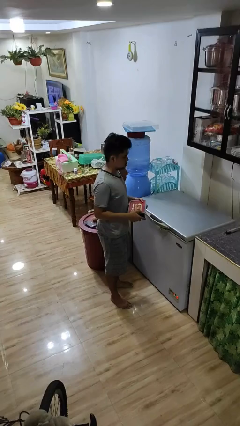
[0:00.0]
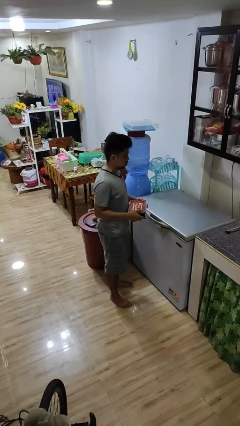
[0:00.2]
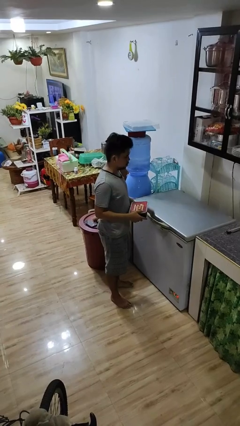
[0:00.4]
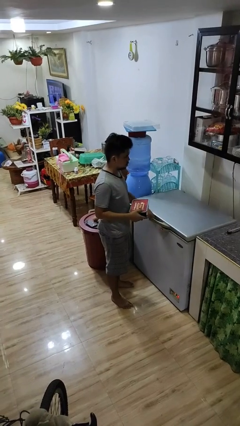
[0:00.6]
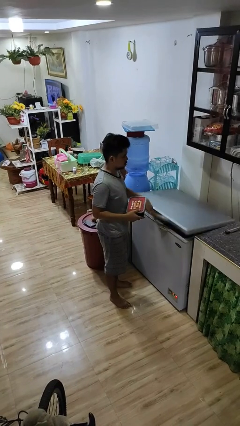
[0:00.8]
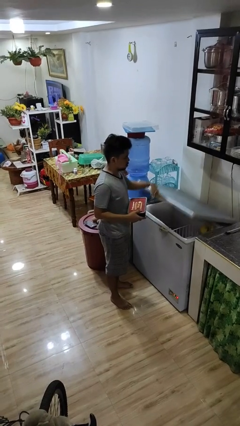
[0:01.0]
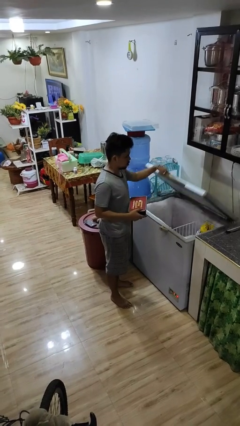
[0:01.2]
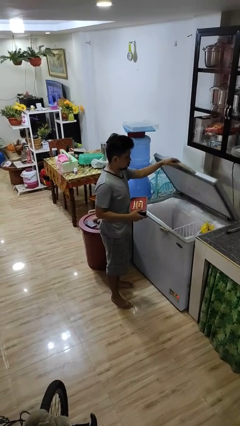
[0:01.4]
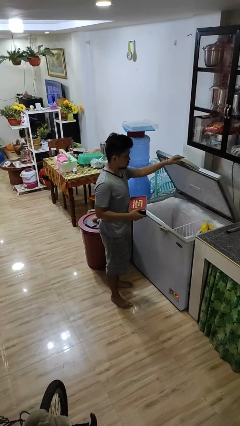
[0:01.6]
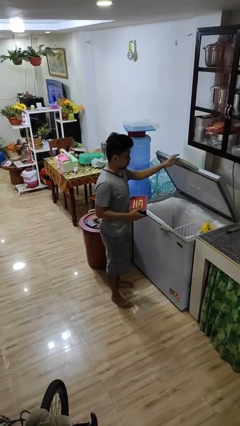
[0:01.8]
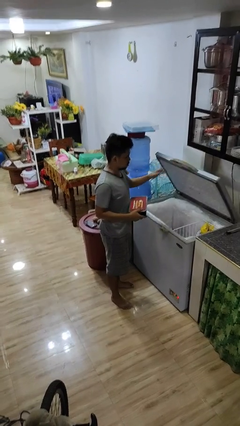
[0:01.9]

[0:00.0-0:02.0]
person opens refrigerator

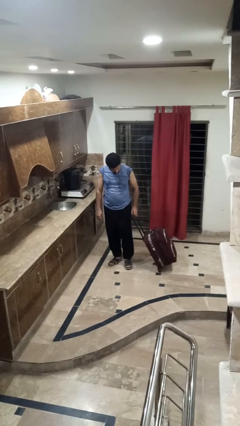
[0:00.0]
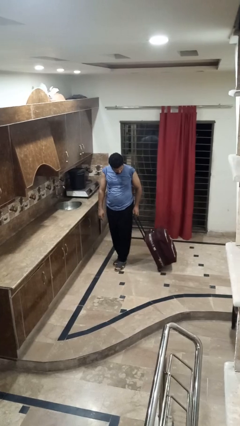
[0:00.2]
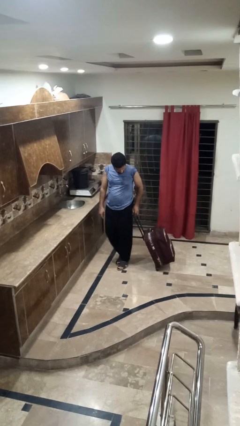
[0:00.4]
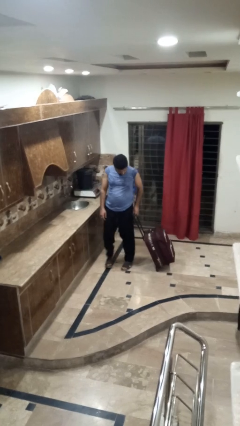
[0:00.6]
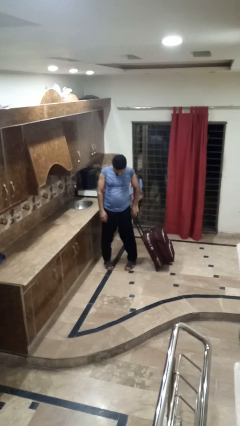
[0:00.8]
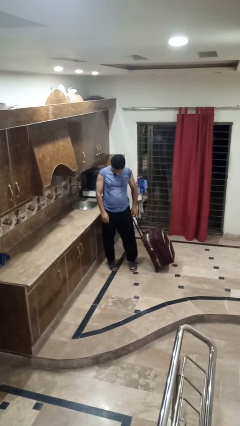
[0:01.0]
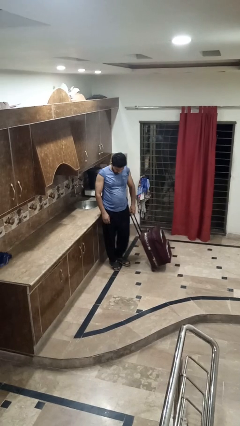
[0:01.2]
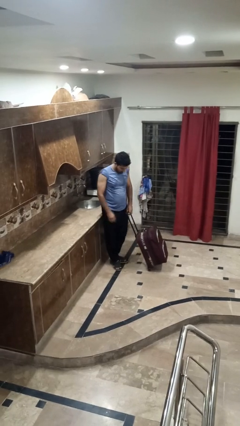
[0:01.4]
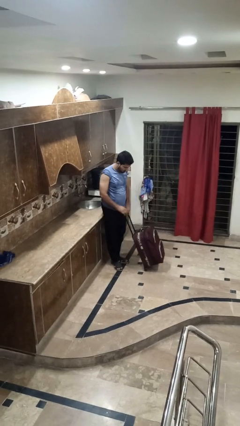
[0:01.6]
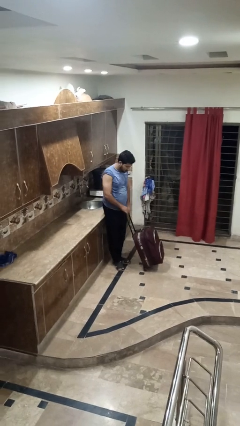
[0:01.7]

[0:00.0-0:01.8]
person pulls wheeled cart

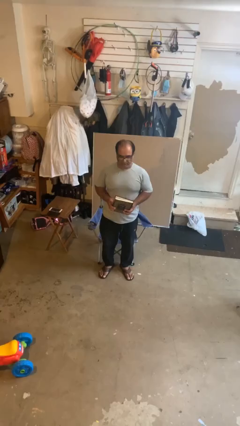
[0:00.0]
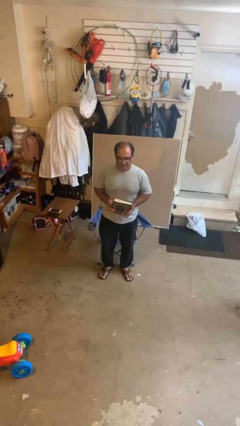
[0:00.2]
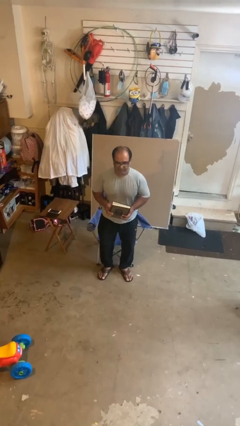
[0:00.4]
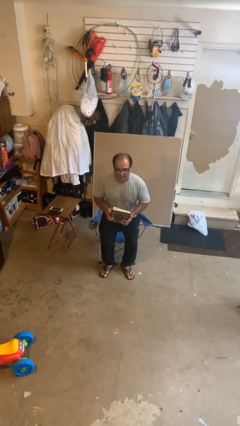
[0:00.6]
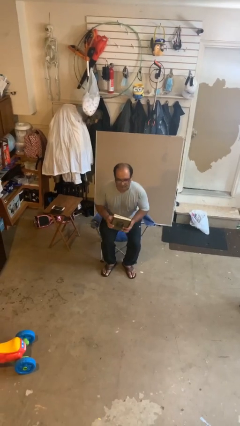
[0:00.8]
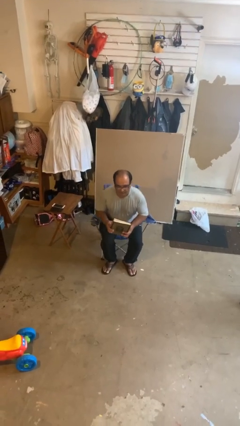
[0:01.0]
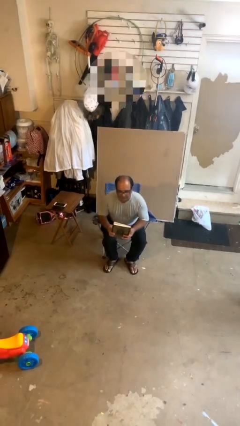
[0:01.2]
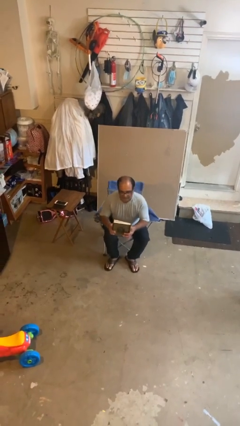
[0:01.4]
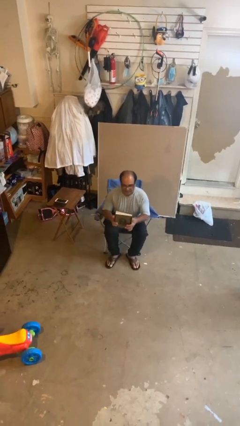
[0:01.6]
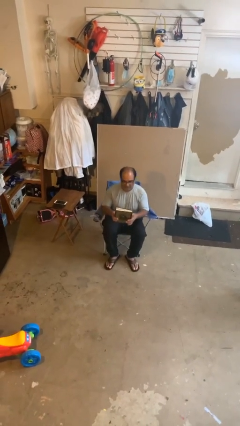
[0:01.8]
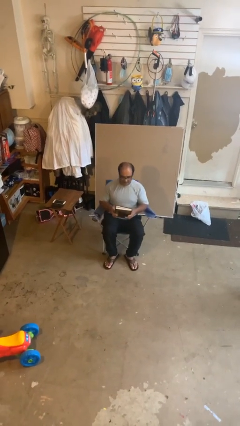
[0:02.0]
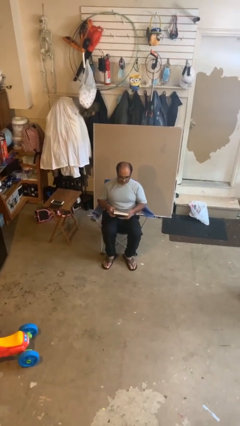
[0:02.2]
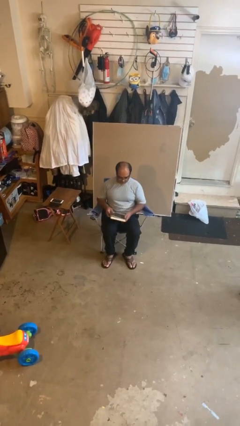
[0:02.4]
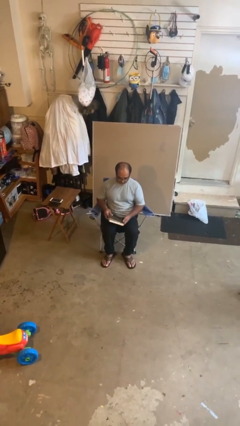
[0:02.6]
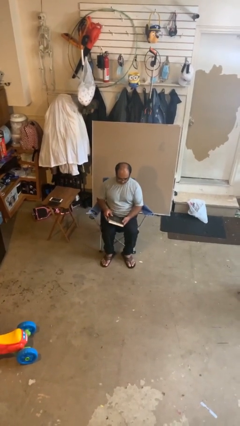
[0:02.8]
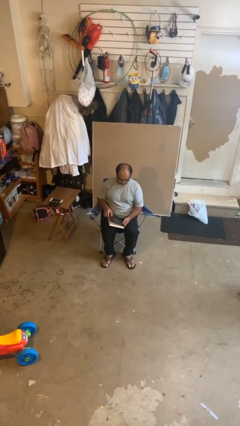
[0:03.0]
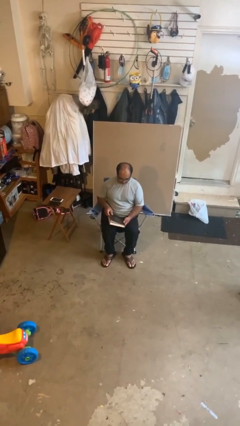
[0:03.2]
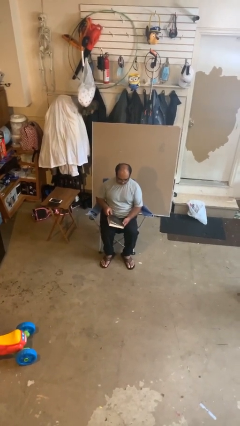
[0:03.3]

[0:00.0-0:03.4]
person sits down

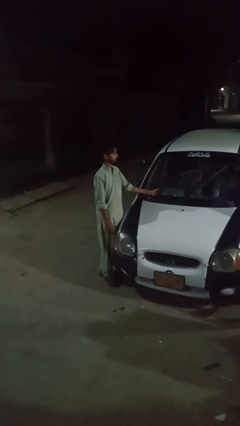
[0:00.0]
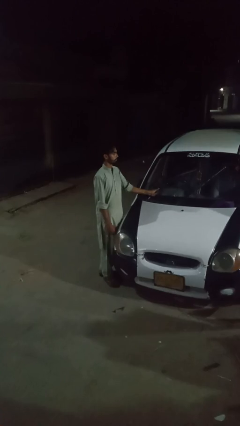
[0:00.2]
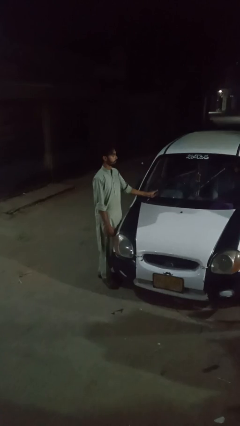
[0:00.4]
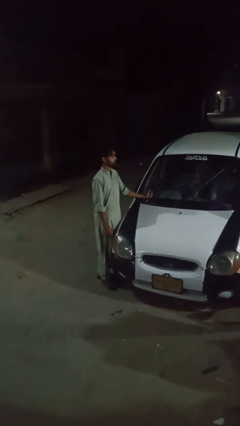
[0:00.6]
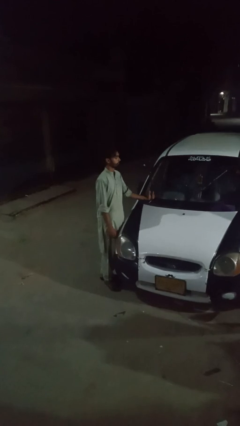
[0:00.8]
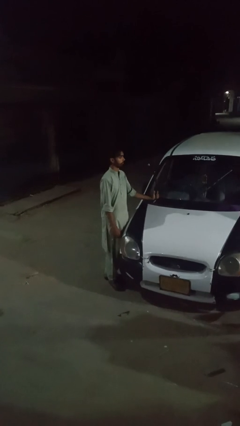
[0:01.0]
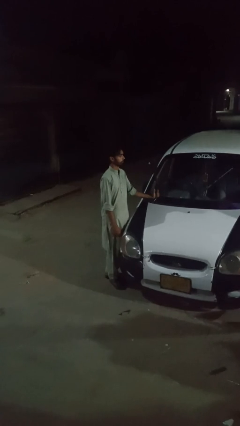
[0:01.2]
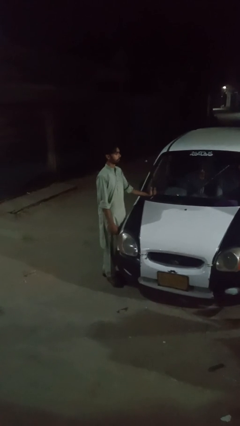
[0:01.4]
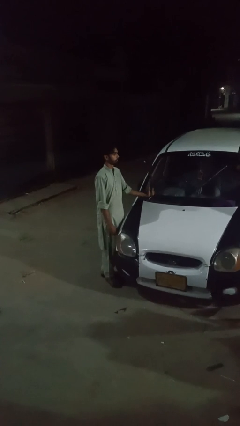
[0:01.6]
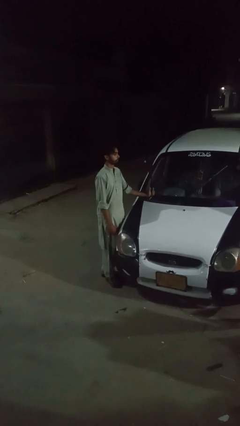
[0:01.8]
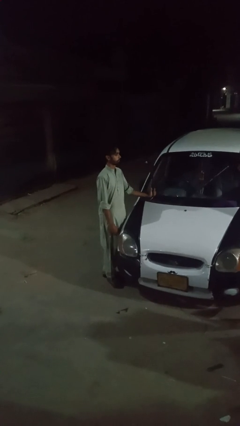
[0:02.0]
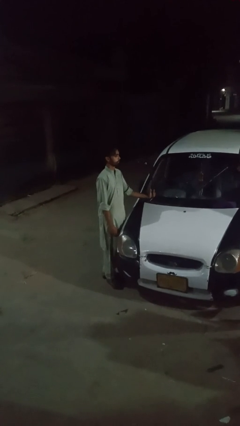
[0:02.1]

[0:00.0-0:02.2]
person flips up car wipers

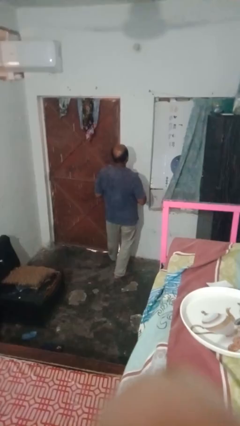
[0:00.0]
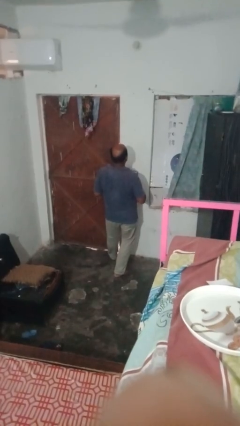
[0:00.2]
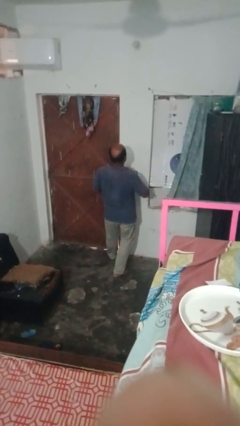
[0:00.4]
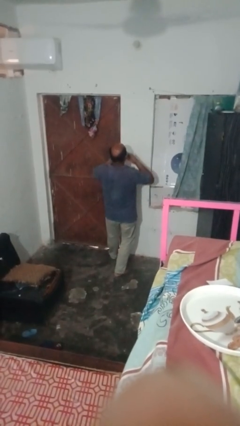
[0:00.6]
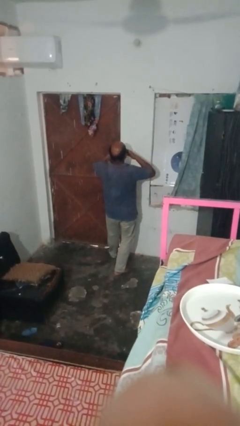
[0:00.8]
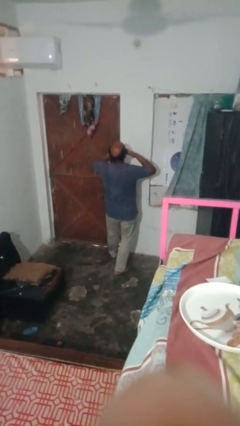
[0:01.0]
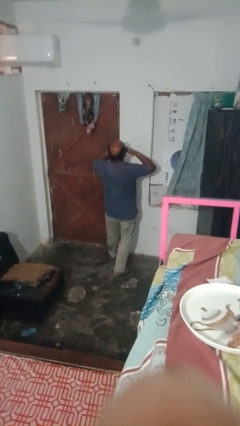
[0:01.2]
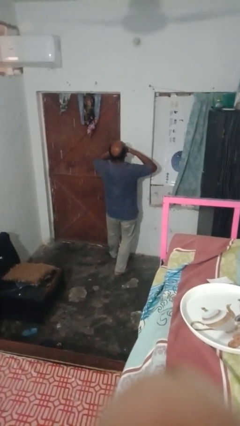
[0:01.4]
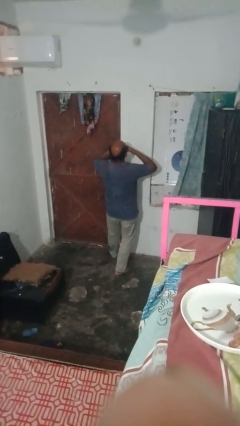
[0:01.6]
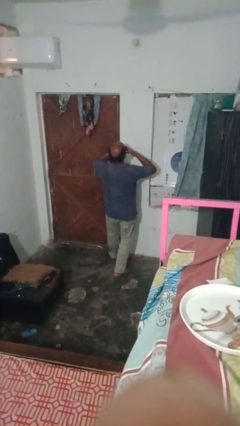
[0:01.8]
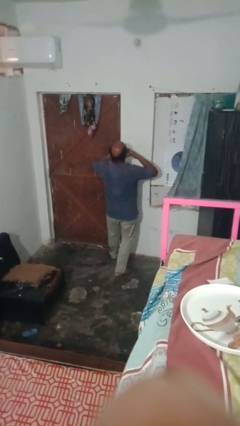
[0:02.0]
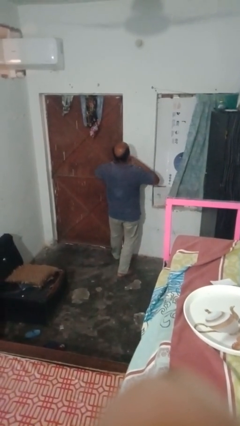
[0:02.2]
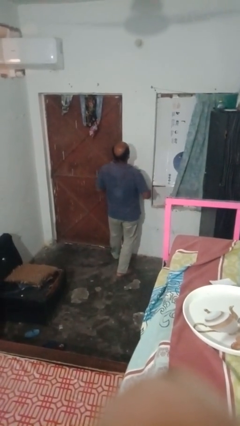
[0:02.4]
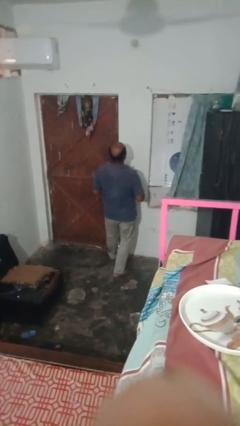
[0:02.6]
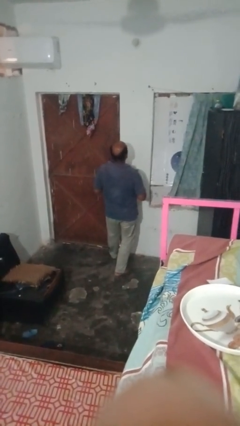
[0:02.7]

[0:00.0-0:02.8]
person yawns

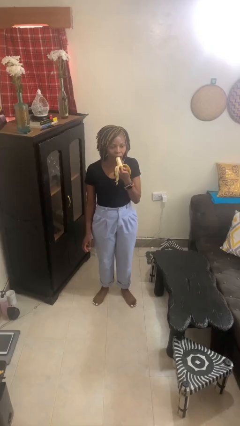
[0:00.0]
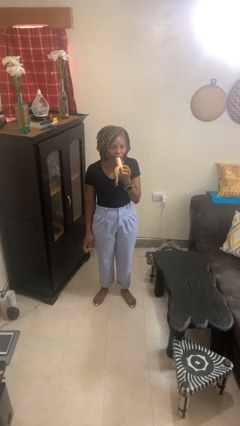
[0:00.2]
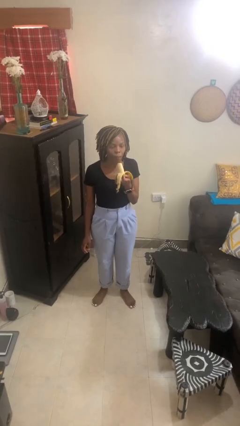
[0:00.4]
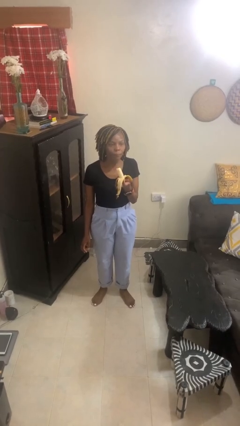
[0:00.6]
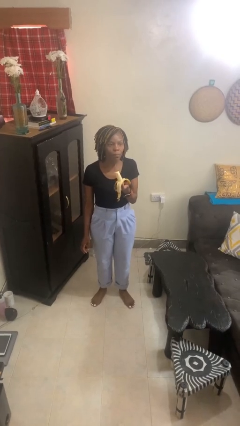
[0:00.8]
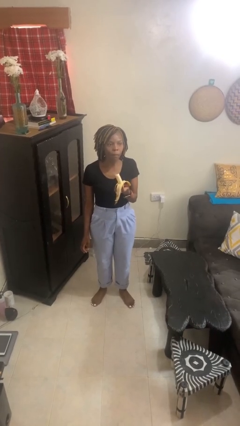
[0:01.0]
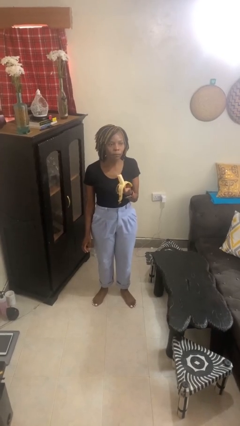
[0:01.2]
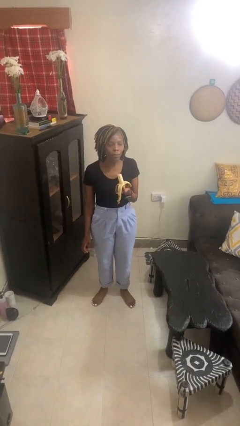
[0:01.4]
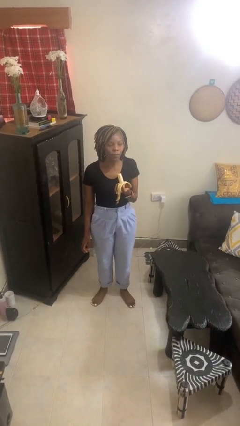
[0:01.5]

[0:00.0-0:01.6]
person eats banana

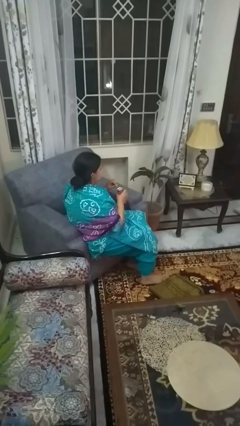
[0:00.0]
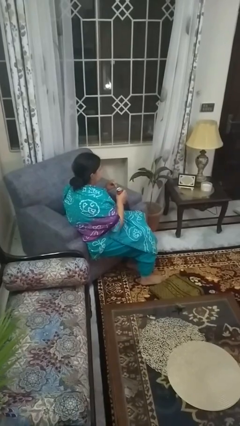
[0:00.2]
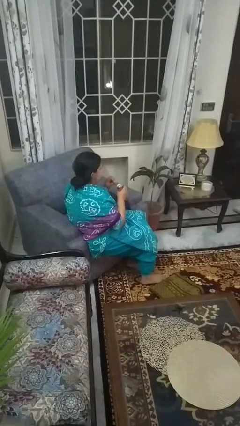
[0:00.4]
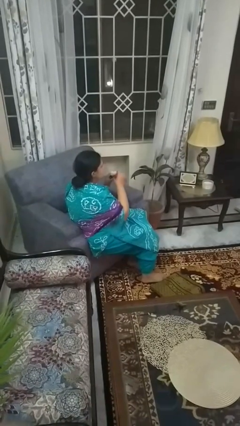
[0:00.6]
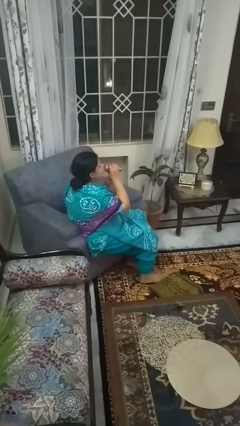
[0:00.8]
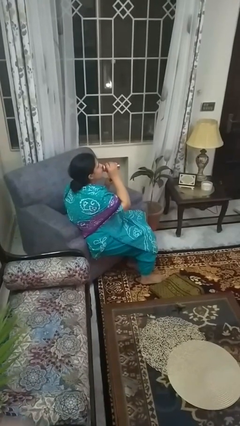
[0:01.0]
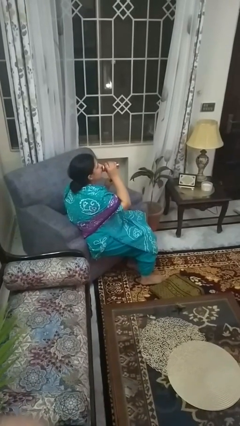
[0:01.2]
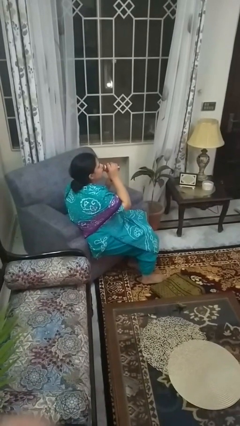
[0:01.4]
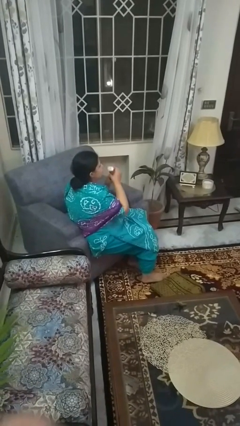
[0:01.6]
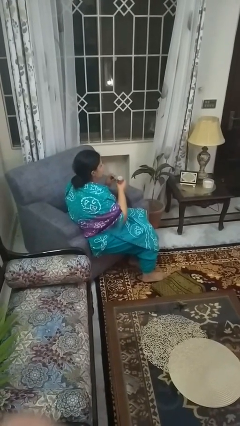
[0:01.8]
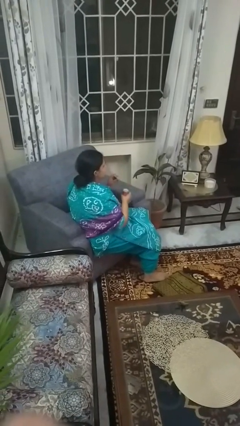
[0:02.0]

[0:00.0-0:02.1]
person drinks from beverage can

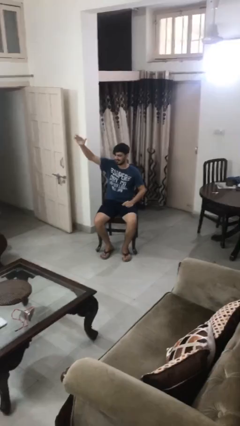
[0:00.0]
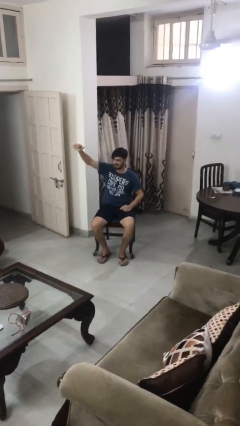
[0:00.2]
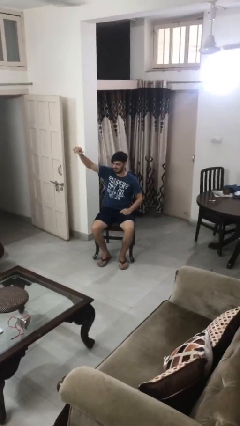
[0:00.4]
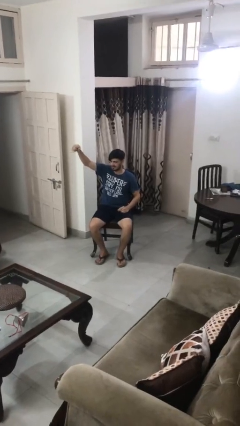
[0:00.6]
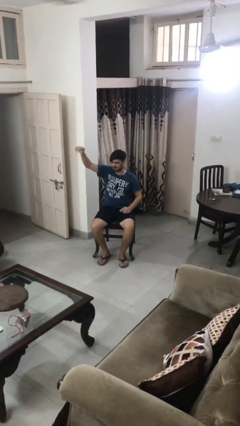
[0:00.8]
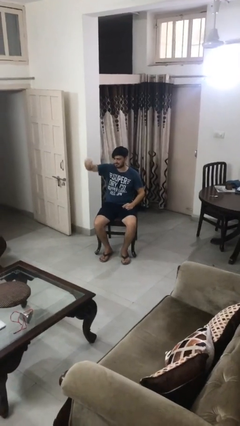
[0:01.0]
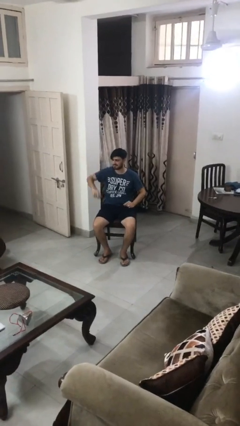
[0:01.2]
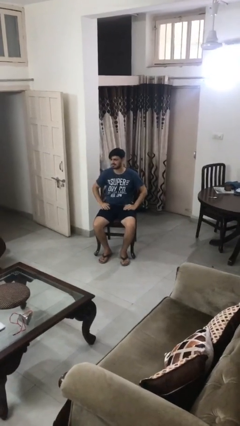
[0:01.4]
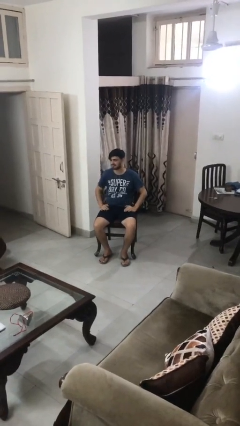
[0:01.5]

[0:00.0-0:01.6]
person gestures come here
